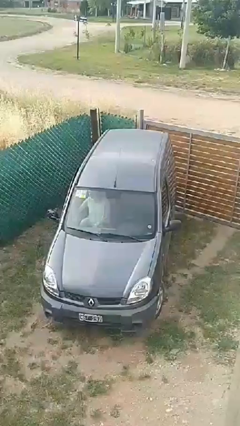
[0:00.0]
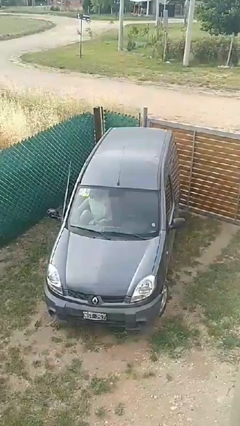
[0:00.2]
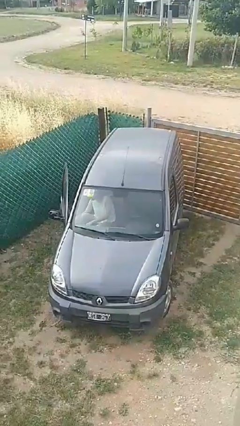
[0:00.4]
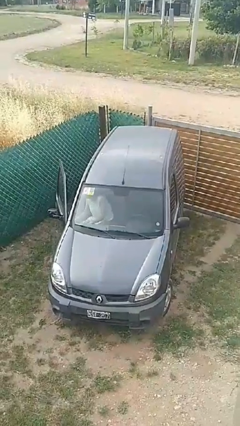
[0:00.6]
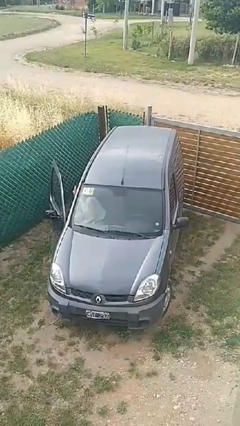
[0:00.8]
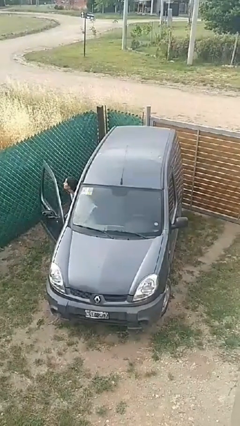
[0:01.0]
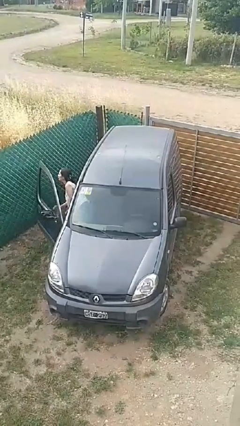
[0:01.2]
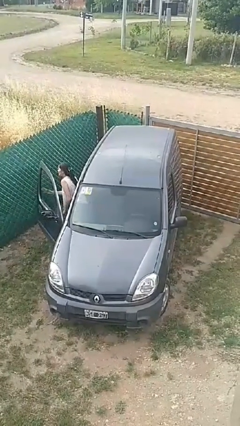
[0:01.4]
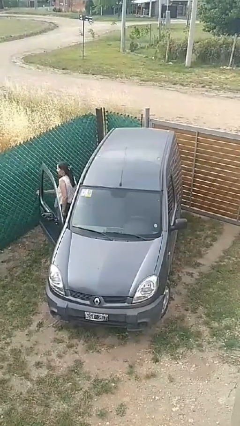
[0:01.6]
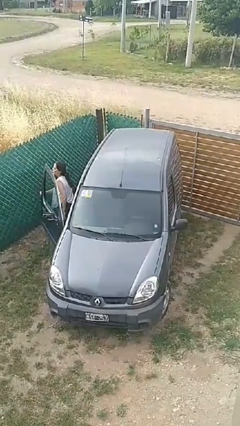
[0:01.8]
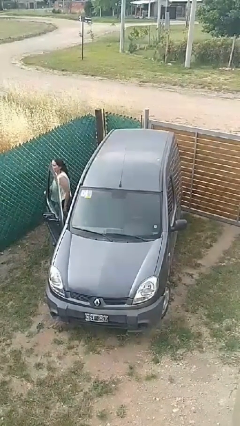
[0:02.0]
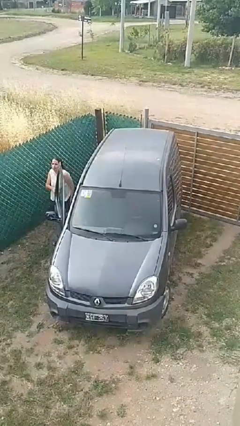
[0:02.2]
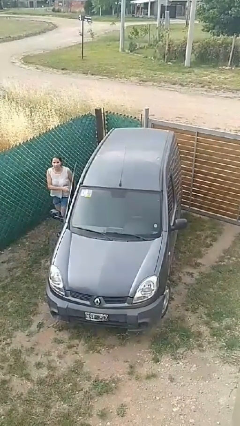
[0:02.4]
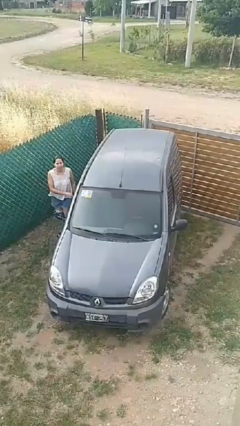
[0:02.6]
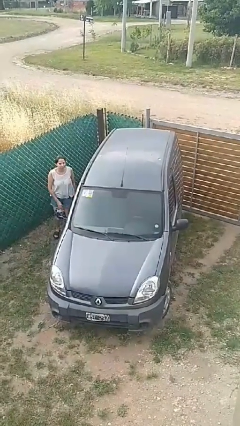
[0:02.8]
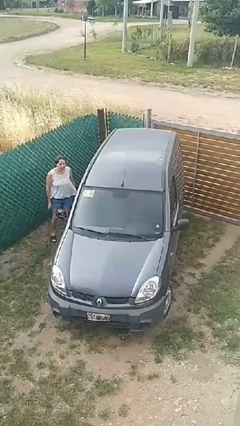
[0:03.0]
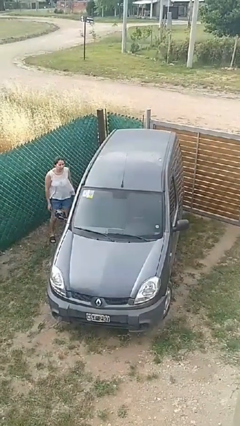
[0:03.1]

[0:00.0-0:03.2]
car drops off person

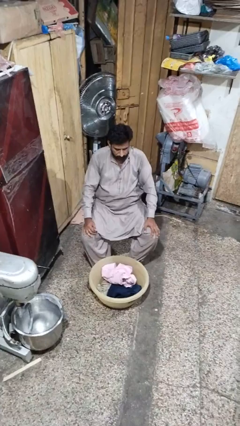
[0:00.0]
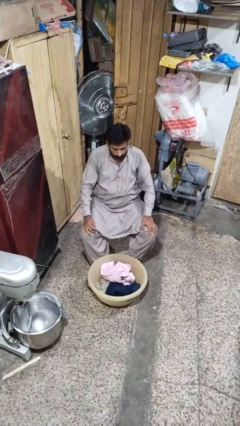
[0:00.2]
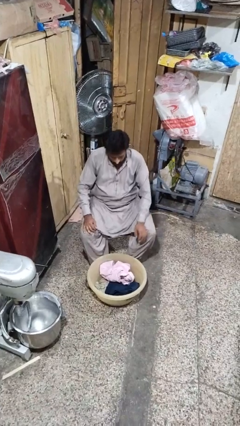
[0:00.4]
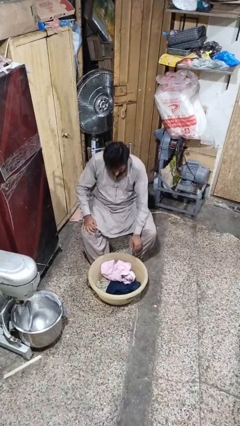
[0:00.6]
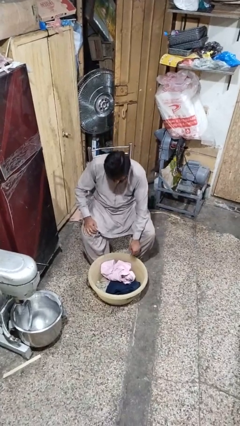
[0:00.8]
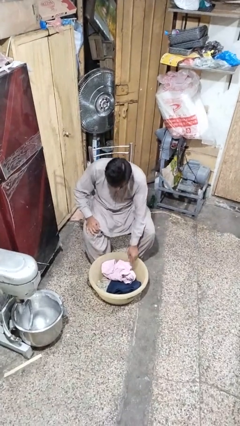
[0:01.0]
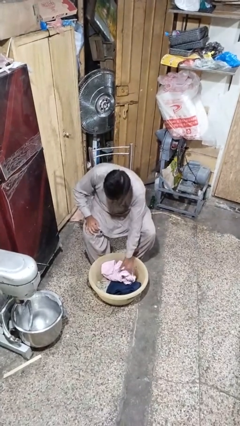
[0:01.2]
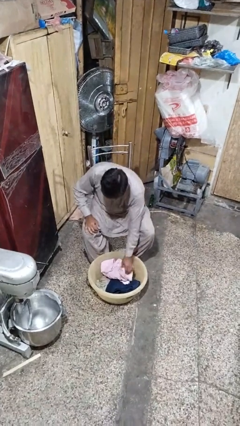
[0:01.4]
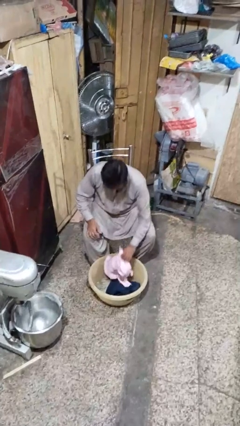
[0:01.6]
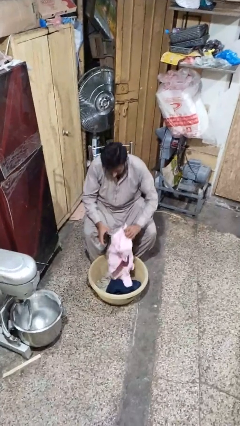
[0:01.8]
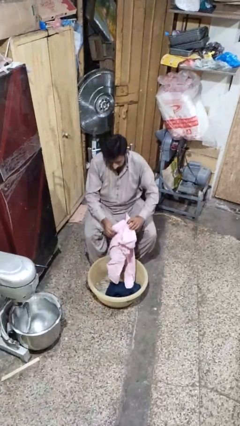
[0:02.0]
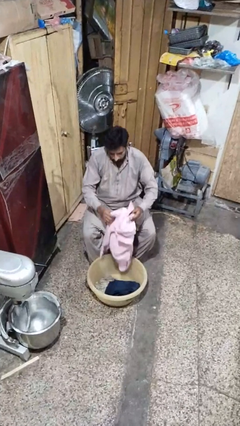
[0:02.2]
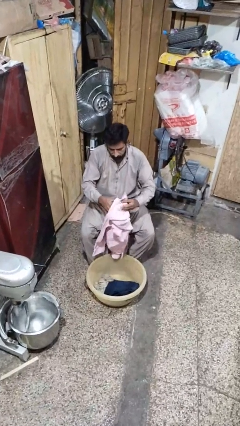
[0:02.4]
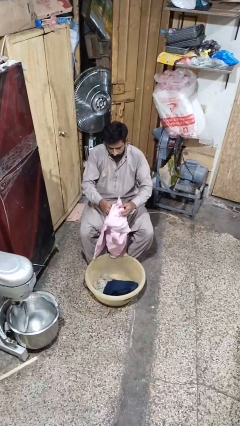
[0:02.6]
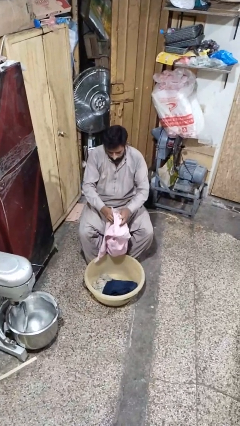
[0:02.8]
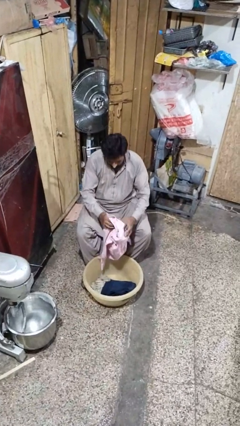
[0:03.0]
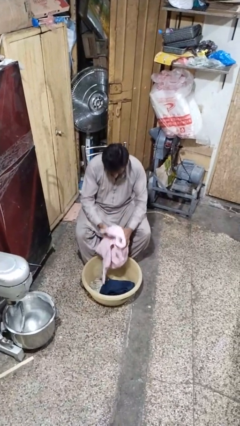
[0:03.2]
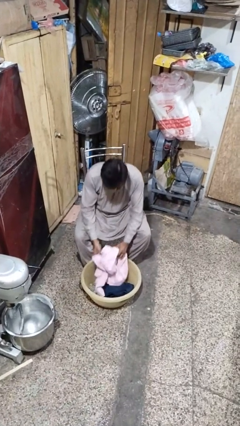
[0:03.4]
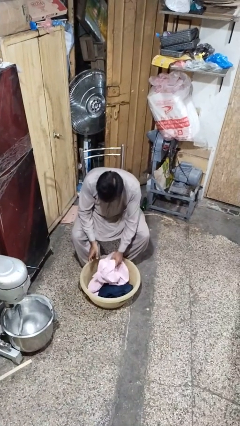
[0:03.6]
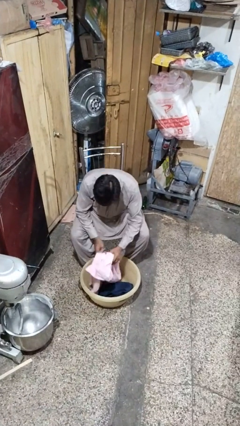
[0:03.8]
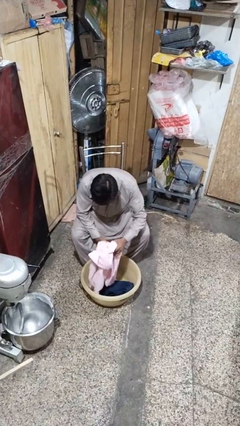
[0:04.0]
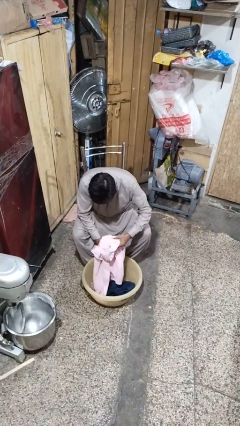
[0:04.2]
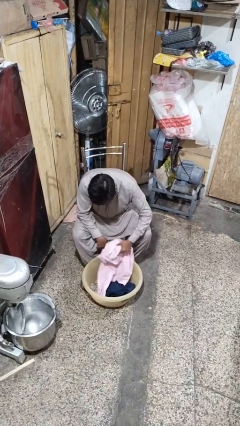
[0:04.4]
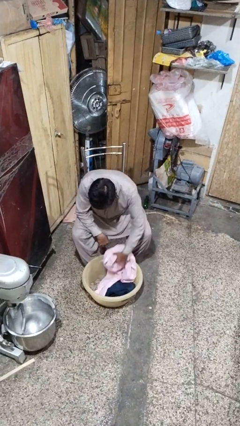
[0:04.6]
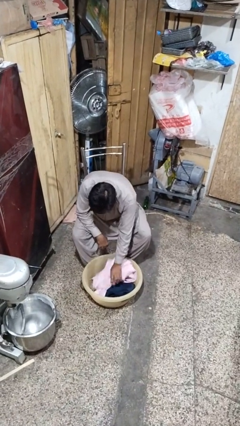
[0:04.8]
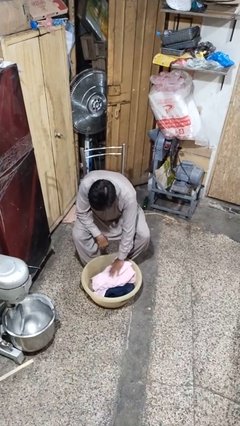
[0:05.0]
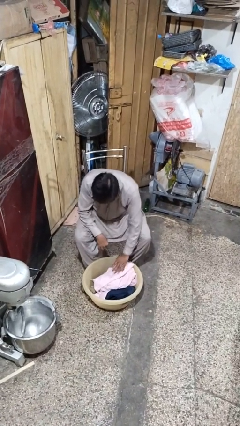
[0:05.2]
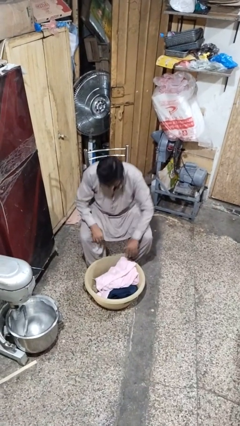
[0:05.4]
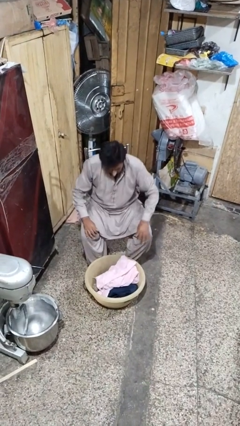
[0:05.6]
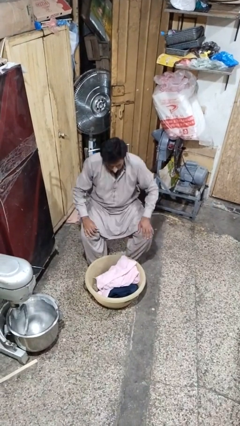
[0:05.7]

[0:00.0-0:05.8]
person folds shirt

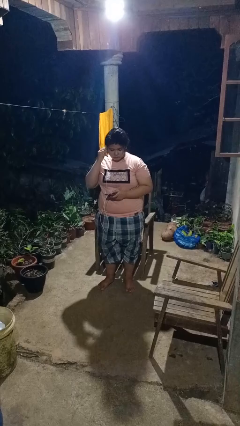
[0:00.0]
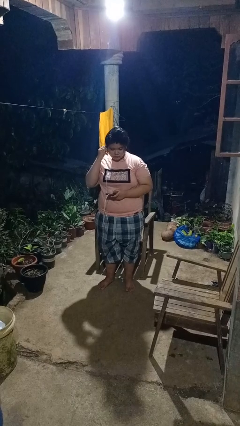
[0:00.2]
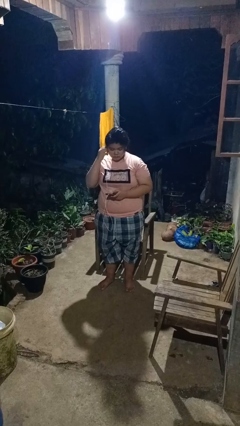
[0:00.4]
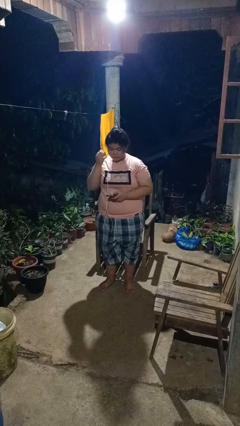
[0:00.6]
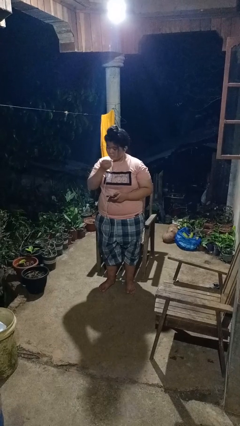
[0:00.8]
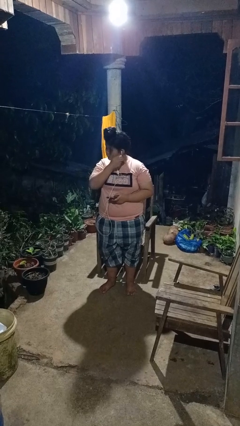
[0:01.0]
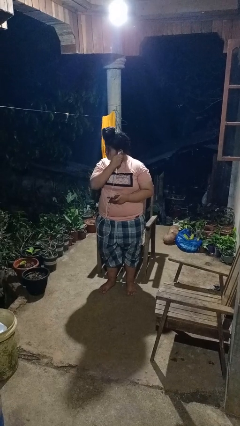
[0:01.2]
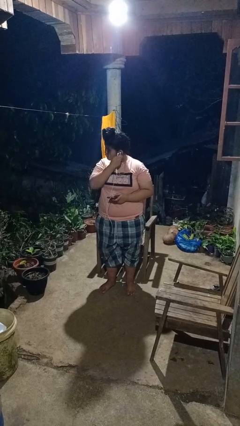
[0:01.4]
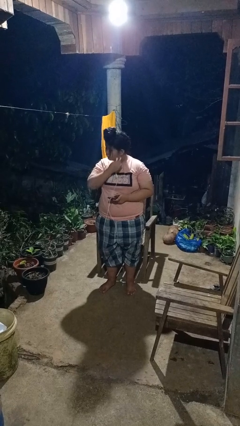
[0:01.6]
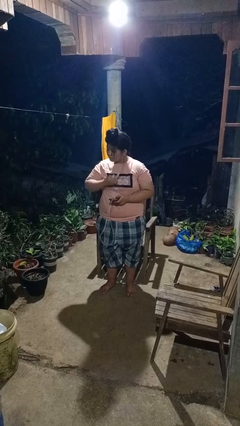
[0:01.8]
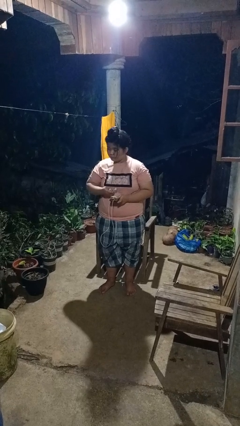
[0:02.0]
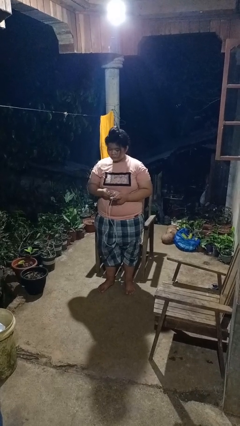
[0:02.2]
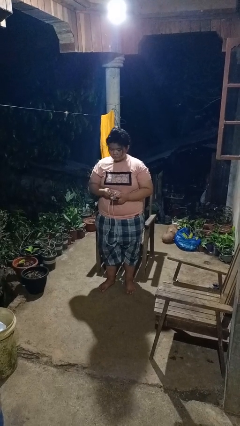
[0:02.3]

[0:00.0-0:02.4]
person takes off headphones

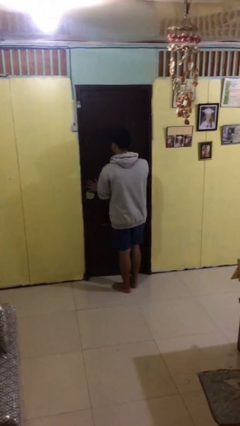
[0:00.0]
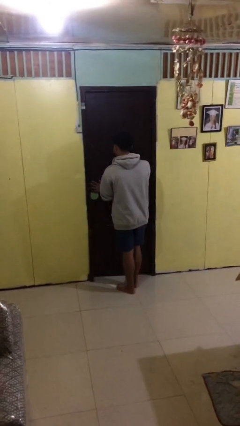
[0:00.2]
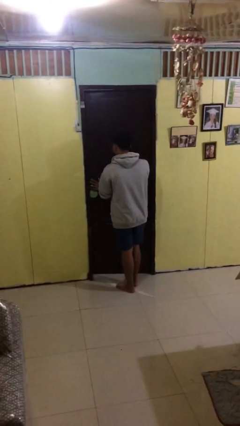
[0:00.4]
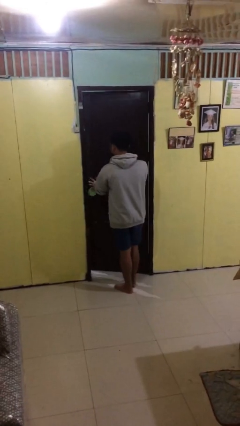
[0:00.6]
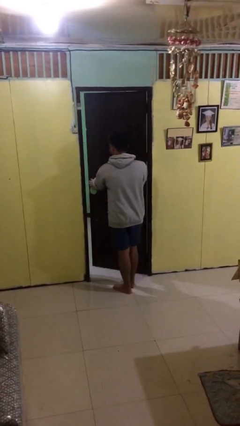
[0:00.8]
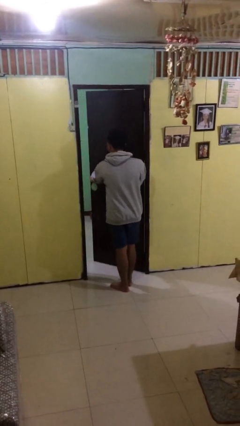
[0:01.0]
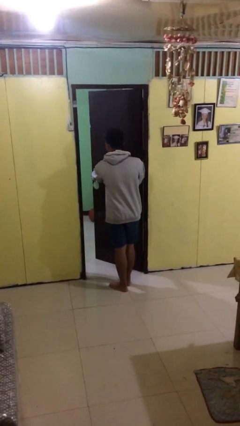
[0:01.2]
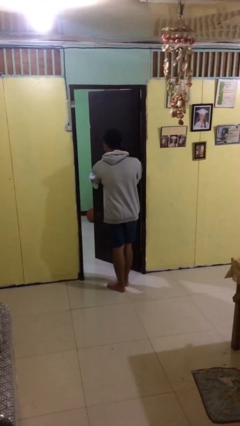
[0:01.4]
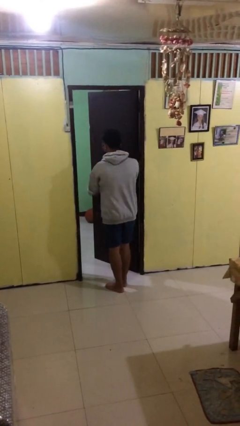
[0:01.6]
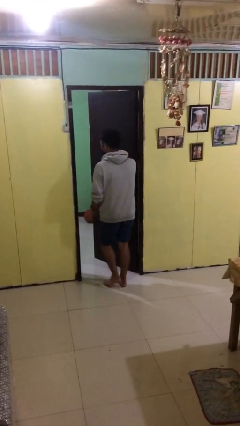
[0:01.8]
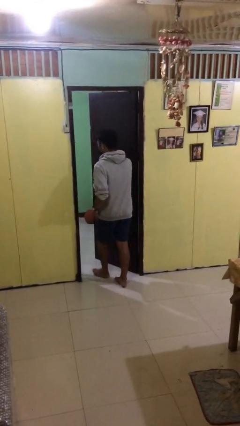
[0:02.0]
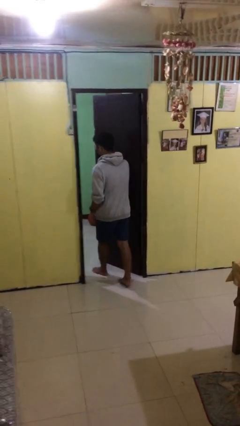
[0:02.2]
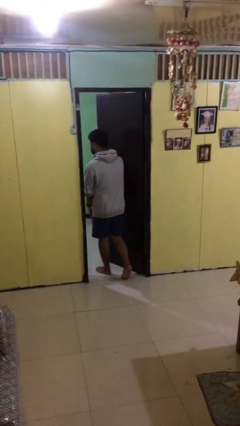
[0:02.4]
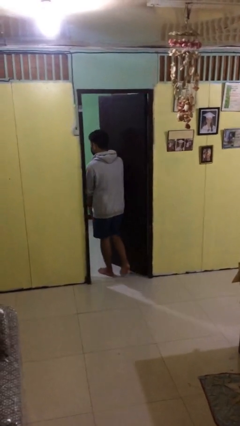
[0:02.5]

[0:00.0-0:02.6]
person opens facility door

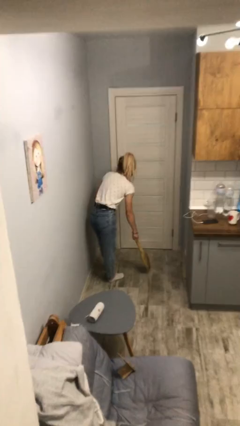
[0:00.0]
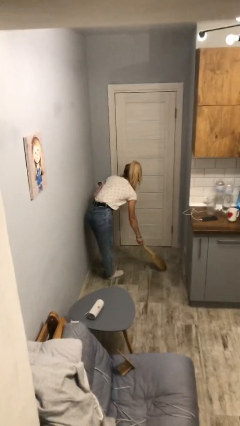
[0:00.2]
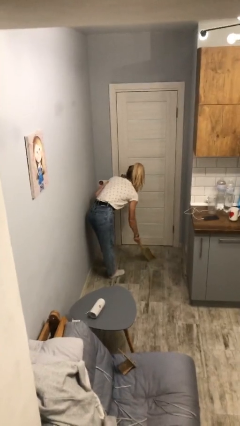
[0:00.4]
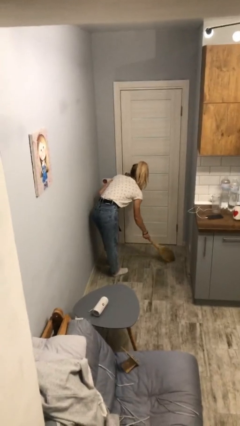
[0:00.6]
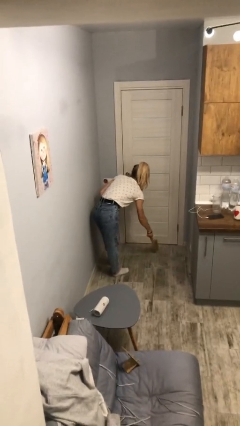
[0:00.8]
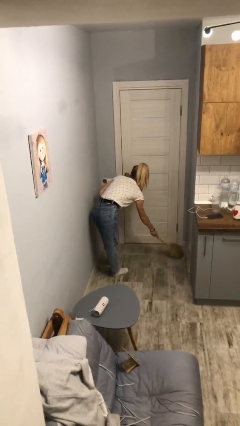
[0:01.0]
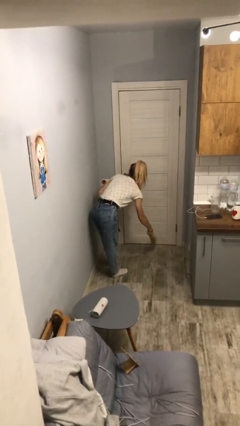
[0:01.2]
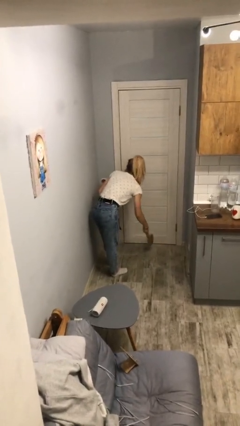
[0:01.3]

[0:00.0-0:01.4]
person sweeps floor

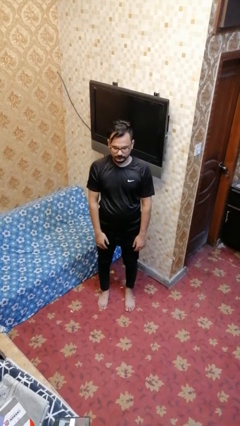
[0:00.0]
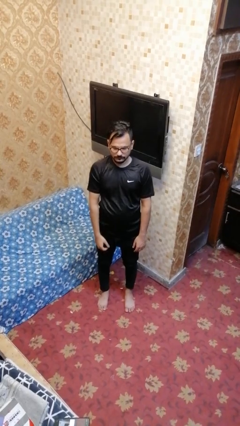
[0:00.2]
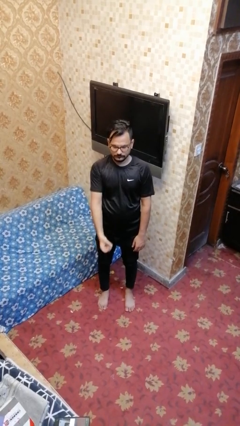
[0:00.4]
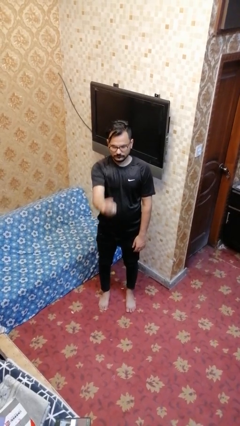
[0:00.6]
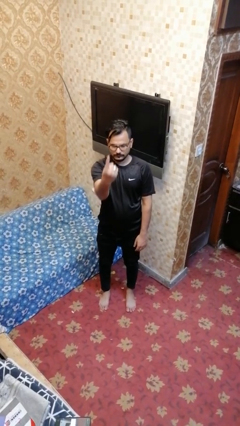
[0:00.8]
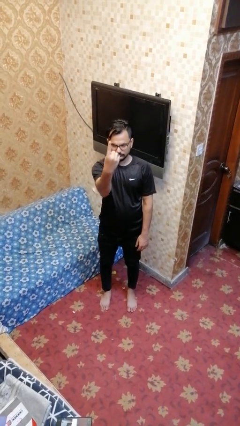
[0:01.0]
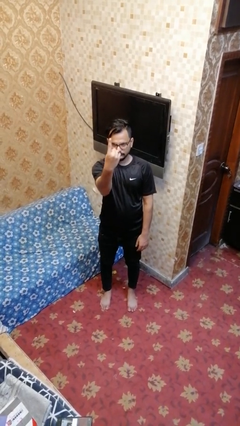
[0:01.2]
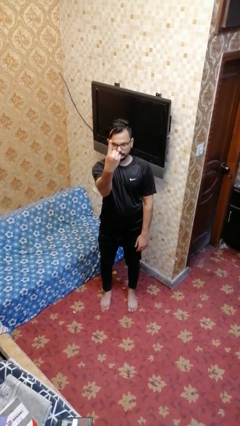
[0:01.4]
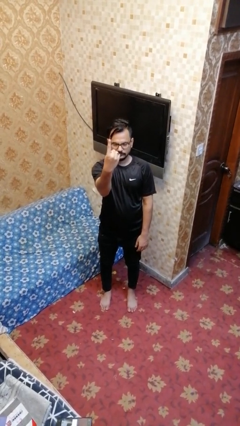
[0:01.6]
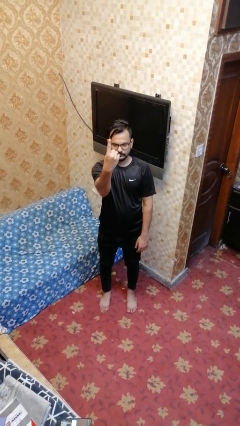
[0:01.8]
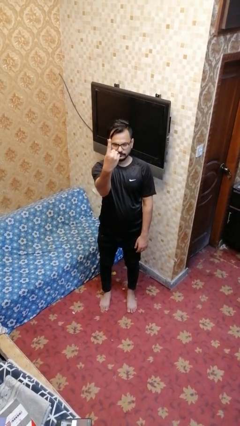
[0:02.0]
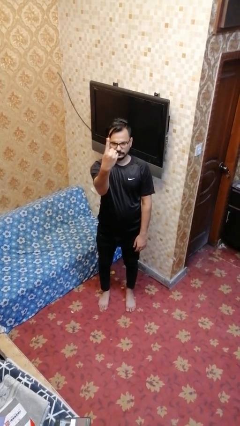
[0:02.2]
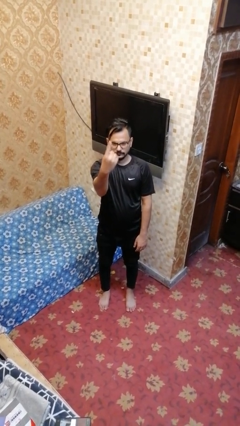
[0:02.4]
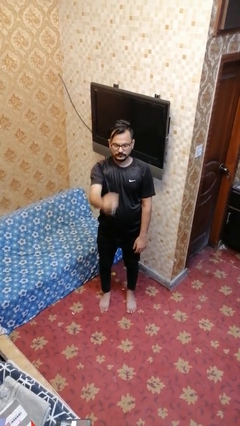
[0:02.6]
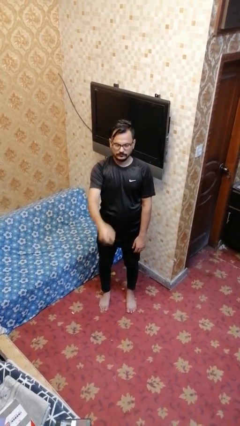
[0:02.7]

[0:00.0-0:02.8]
person gestures number one
